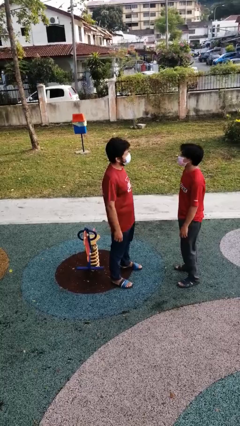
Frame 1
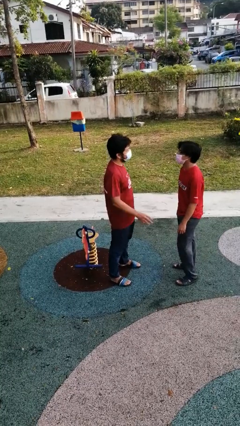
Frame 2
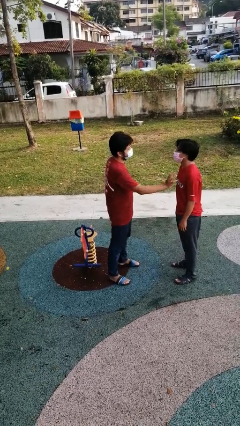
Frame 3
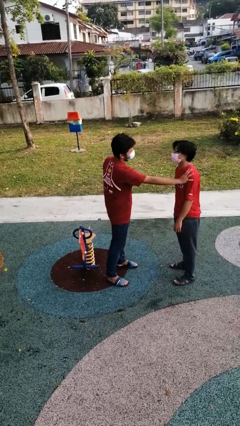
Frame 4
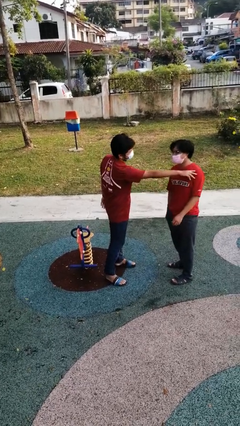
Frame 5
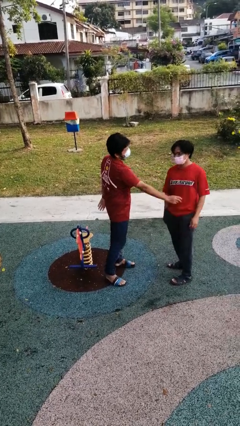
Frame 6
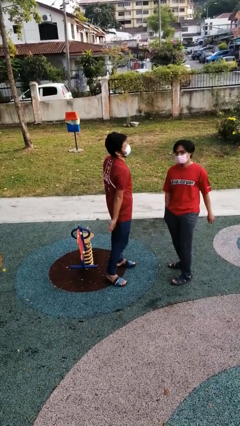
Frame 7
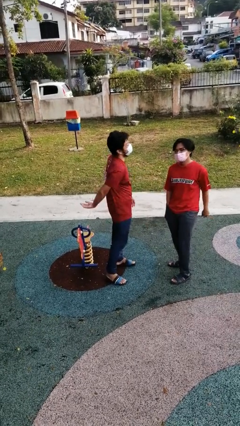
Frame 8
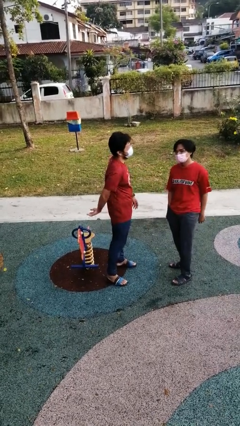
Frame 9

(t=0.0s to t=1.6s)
person shoves person

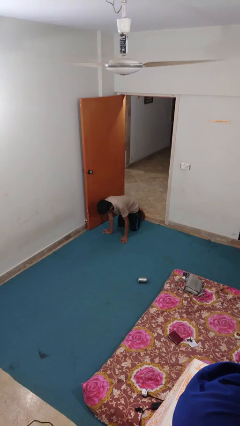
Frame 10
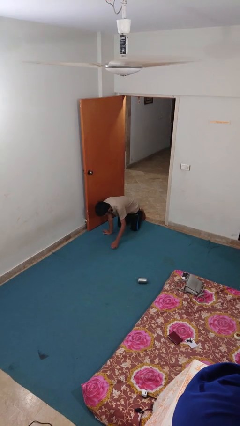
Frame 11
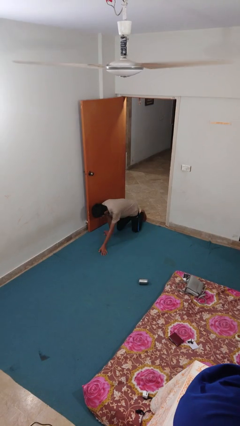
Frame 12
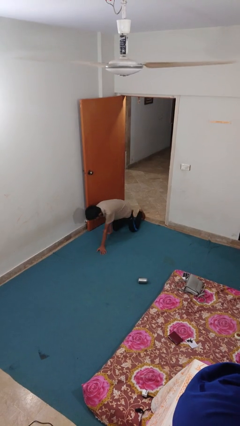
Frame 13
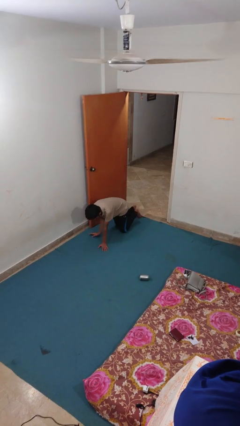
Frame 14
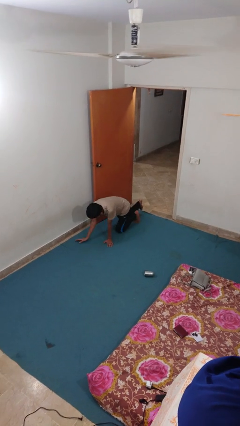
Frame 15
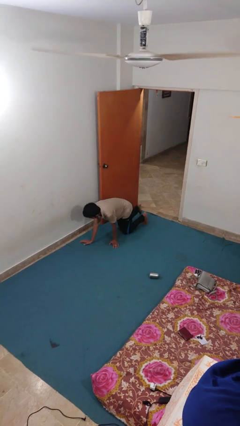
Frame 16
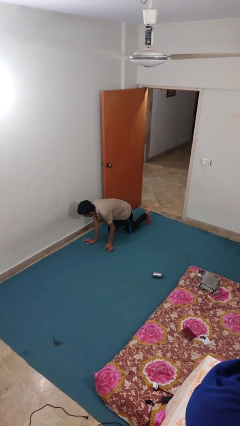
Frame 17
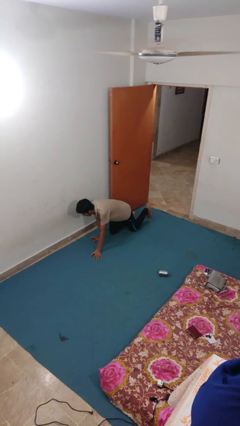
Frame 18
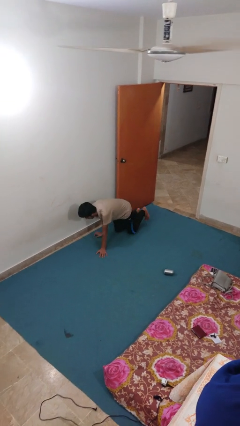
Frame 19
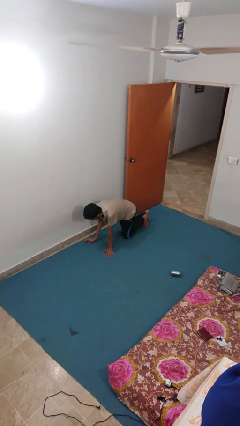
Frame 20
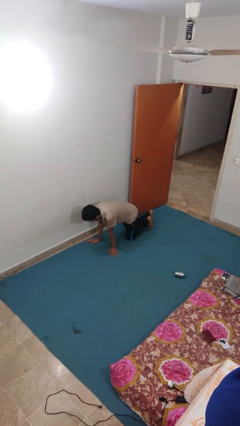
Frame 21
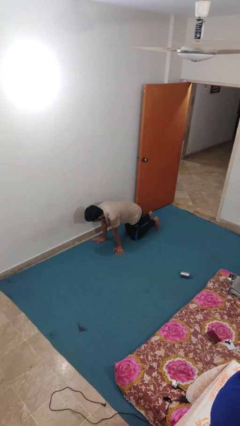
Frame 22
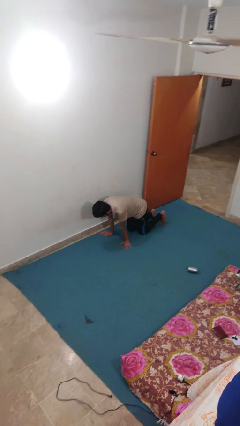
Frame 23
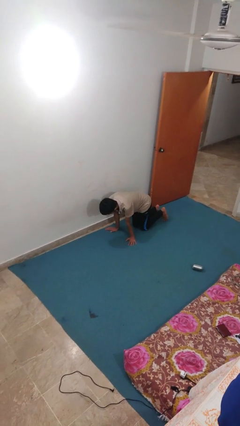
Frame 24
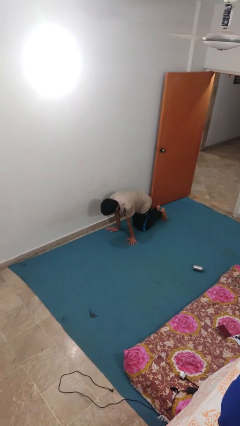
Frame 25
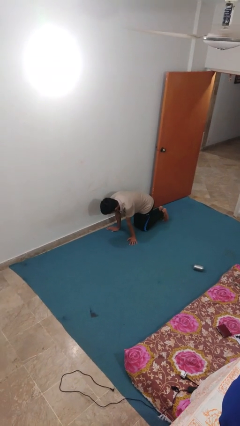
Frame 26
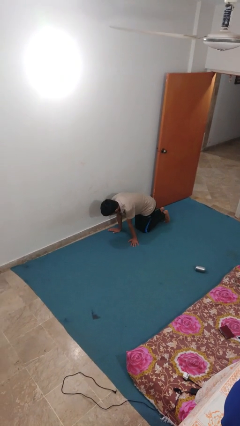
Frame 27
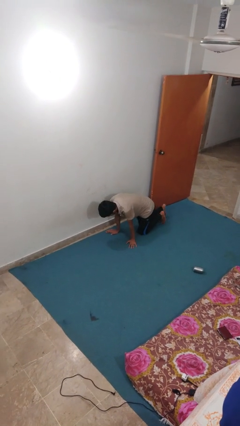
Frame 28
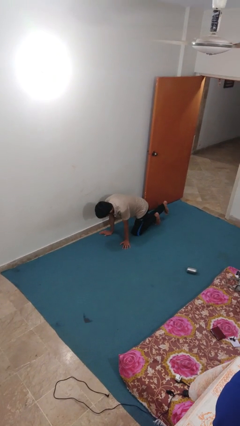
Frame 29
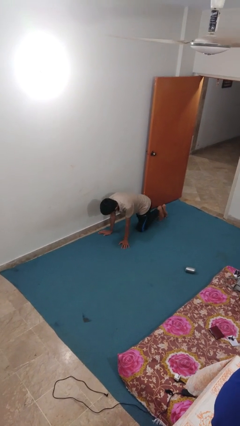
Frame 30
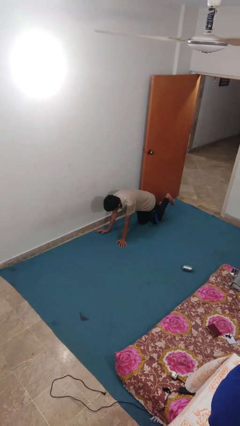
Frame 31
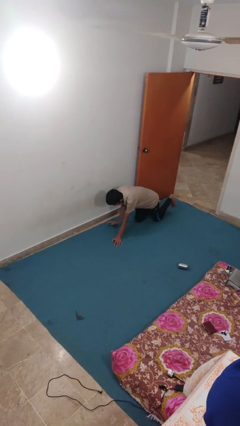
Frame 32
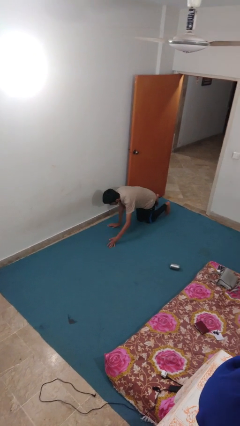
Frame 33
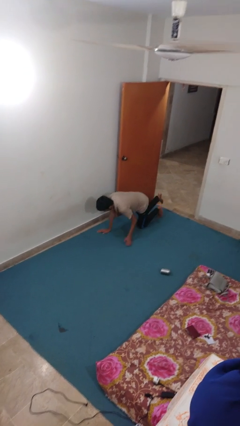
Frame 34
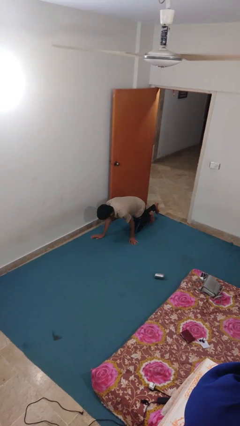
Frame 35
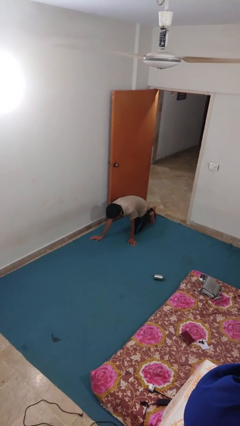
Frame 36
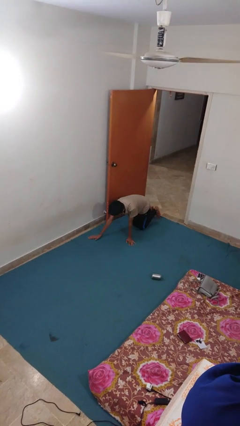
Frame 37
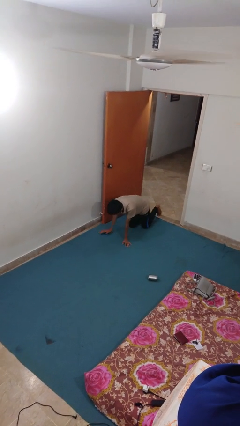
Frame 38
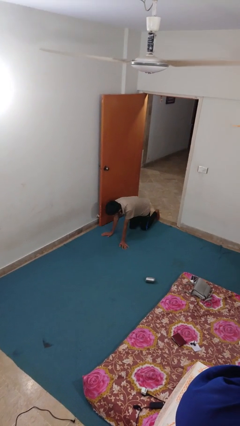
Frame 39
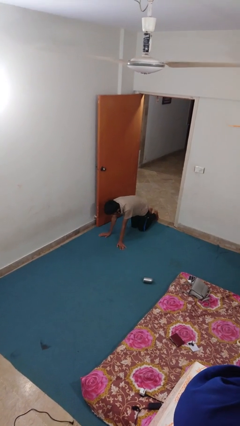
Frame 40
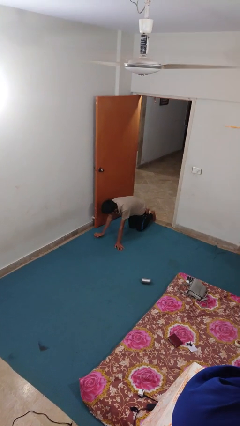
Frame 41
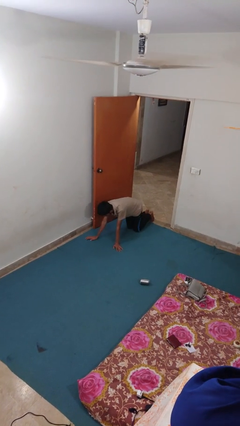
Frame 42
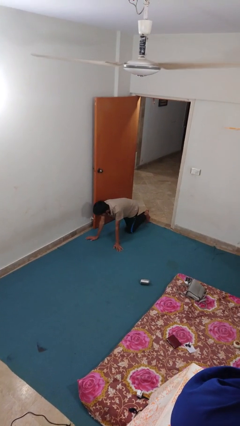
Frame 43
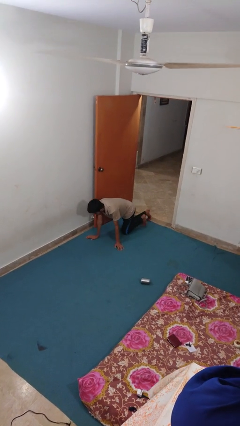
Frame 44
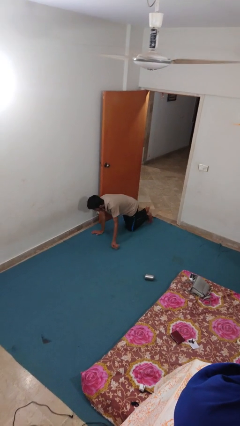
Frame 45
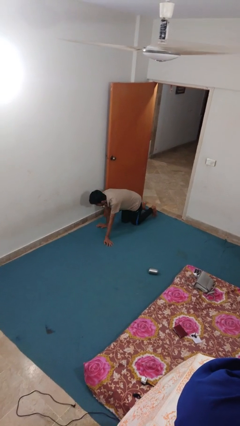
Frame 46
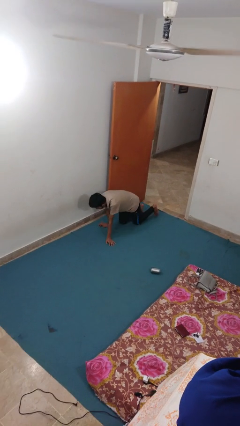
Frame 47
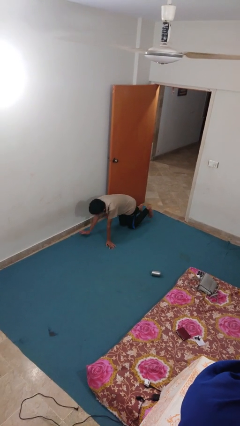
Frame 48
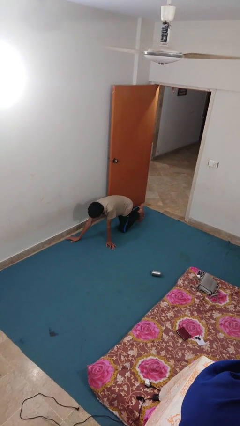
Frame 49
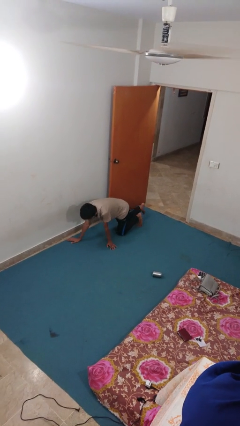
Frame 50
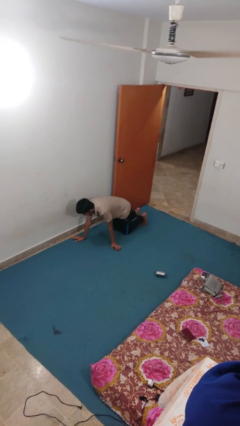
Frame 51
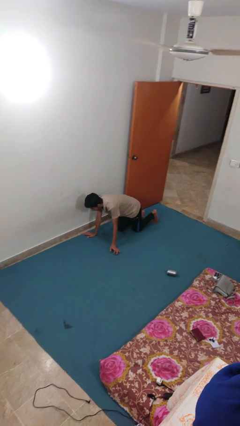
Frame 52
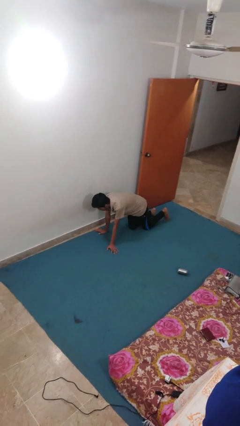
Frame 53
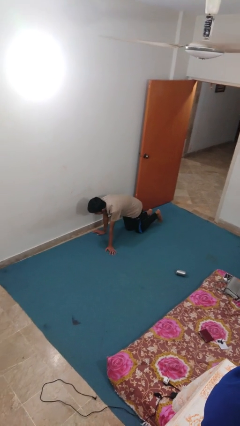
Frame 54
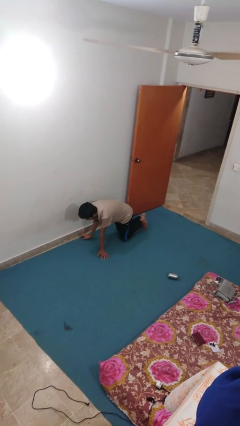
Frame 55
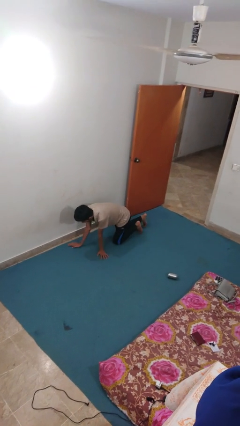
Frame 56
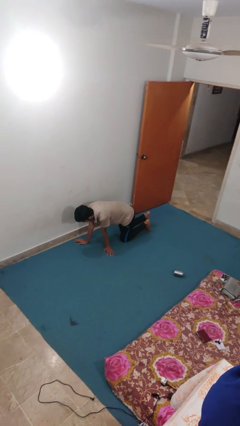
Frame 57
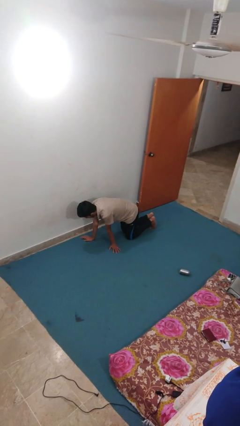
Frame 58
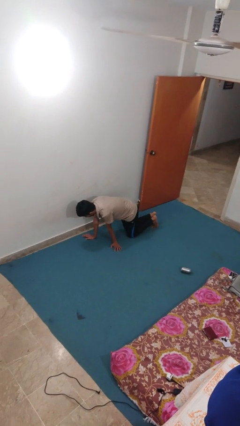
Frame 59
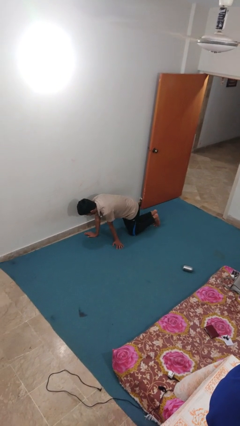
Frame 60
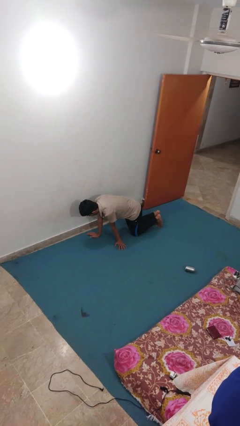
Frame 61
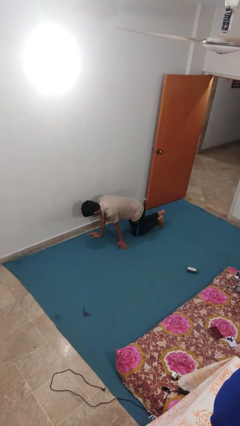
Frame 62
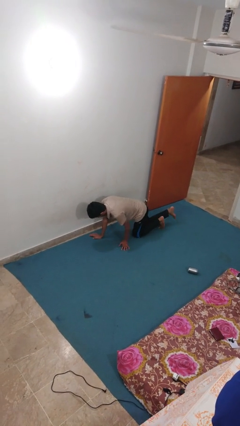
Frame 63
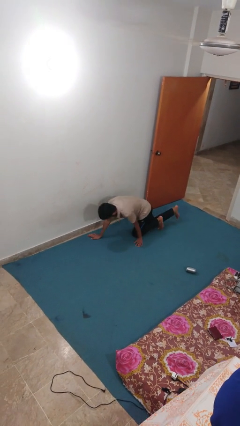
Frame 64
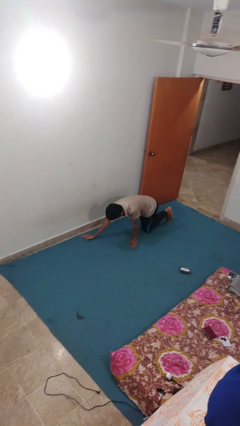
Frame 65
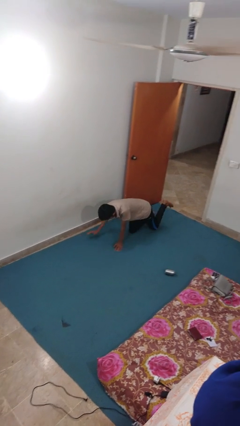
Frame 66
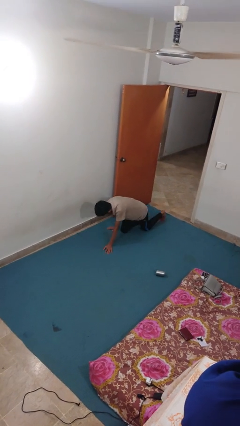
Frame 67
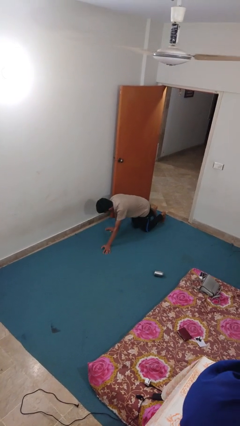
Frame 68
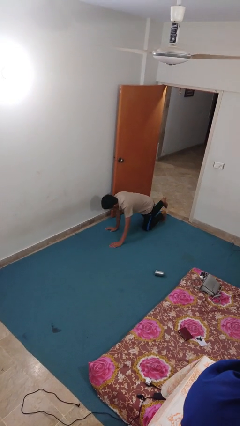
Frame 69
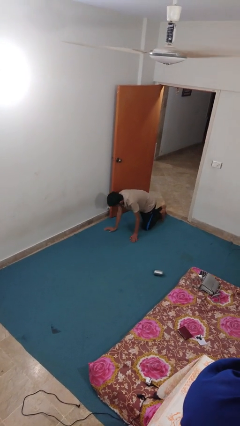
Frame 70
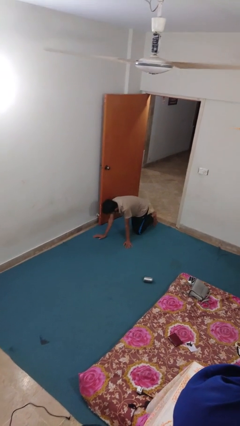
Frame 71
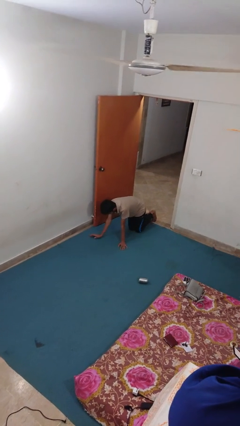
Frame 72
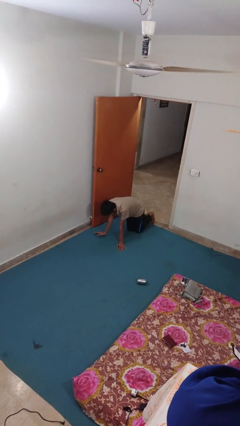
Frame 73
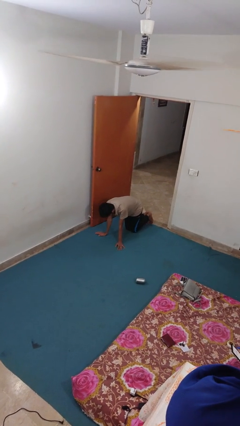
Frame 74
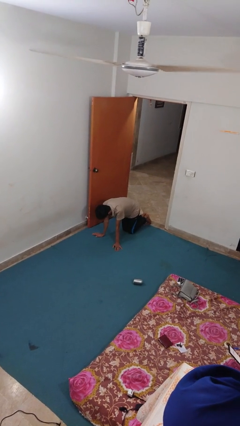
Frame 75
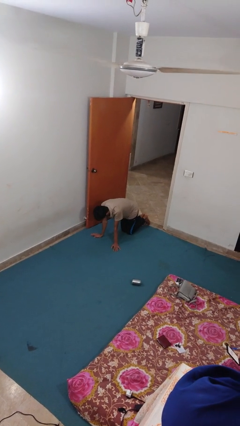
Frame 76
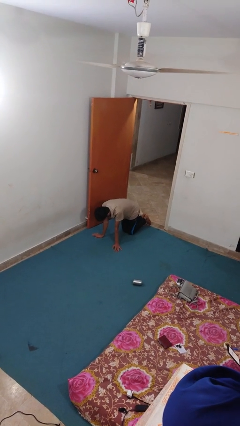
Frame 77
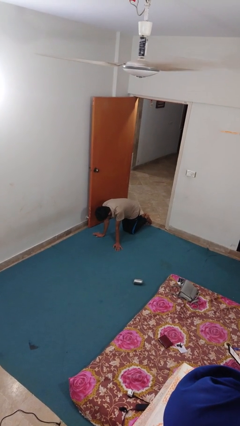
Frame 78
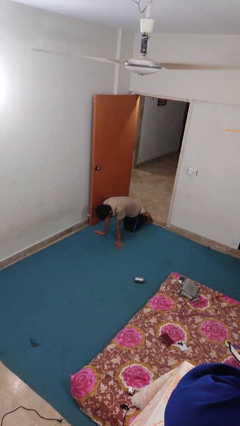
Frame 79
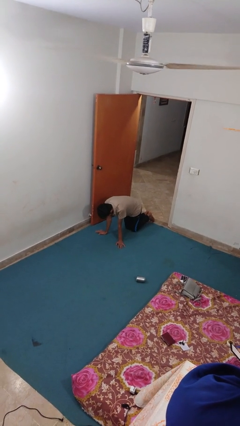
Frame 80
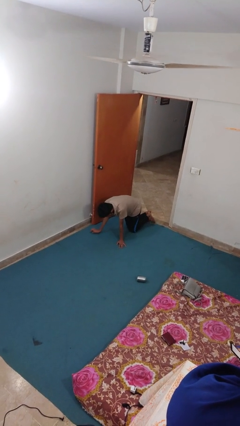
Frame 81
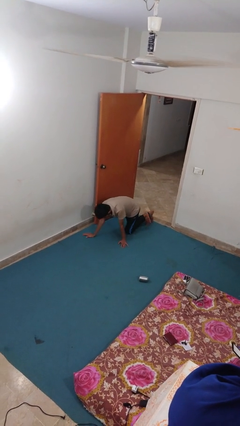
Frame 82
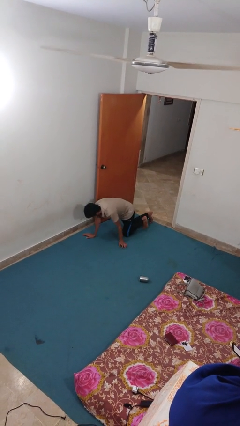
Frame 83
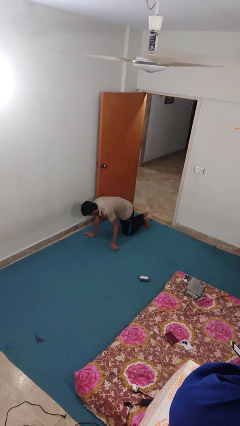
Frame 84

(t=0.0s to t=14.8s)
person crawls

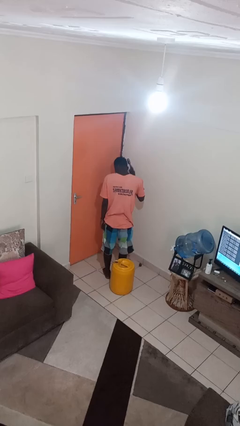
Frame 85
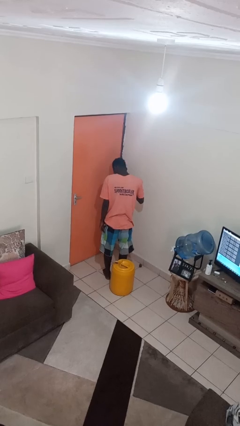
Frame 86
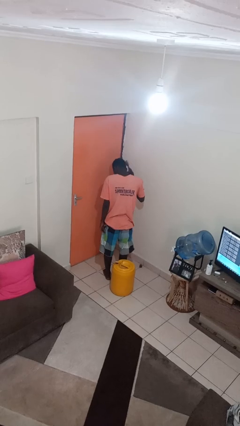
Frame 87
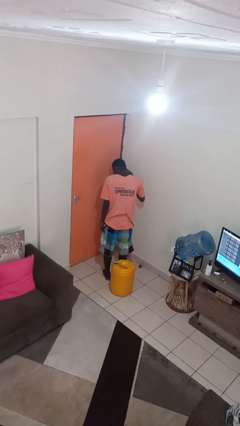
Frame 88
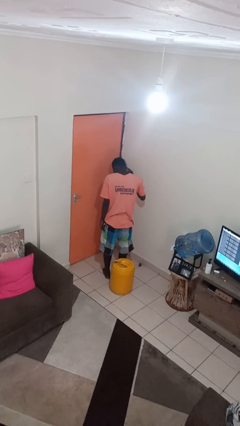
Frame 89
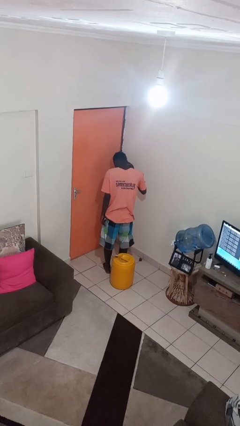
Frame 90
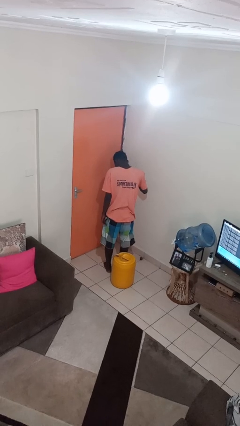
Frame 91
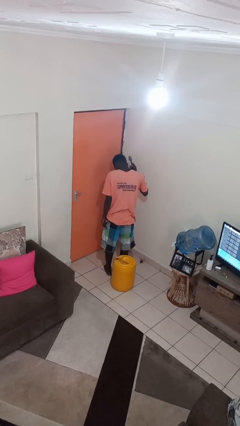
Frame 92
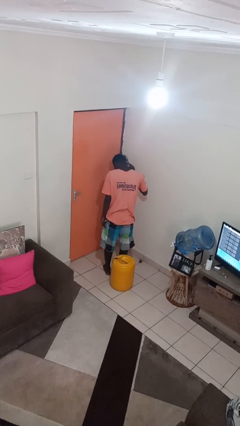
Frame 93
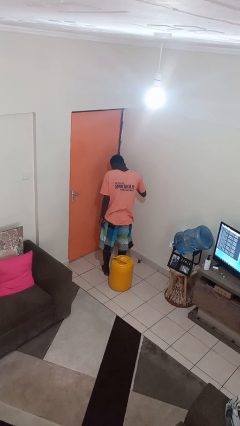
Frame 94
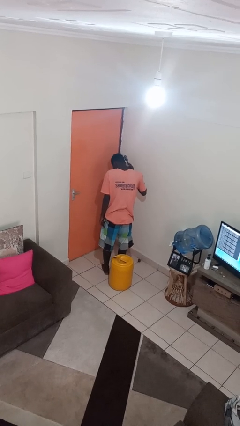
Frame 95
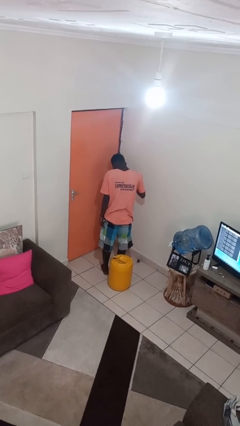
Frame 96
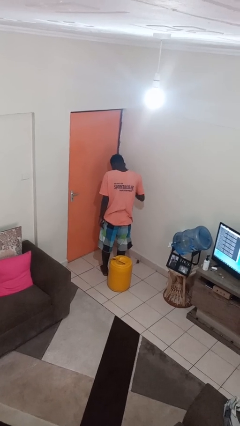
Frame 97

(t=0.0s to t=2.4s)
person brushes hair
